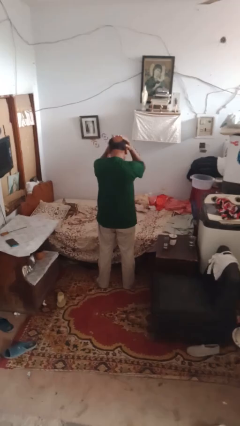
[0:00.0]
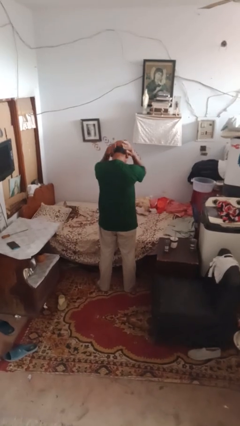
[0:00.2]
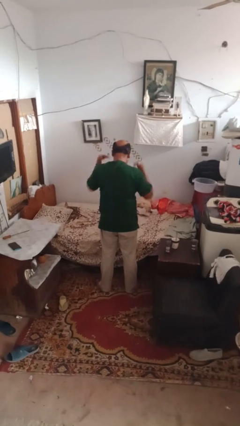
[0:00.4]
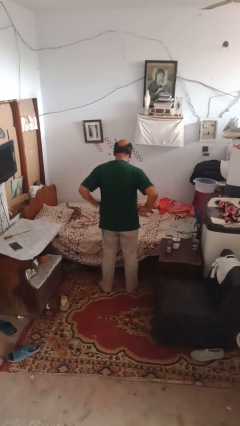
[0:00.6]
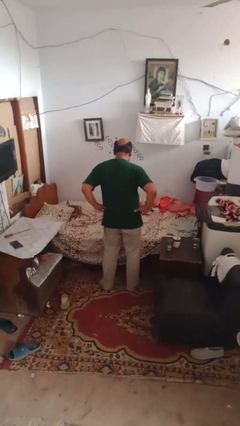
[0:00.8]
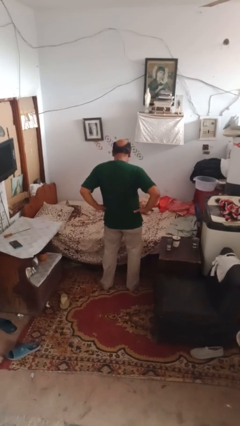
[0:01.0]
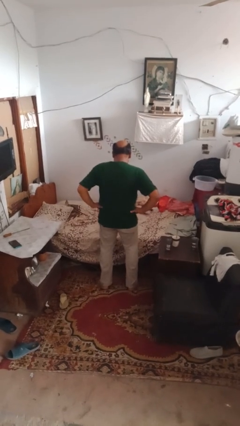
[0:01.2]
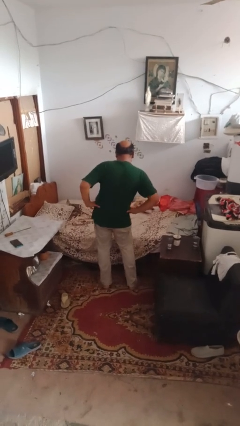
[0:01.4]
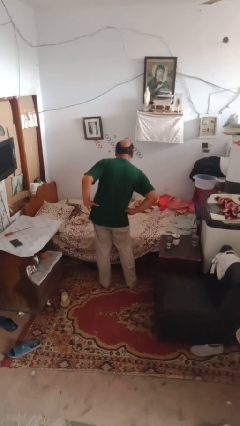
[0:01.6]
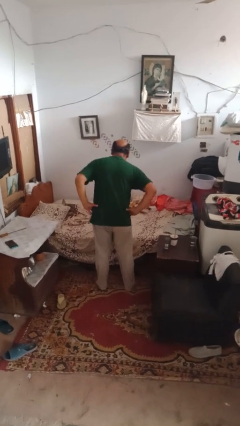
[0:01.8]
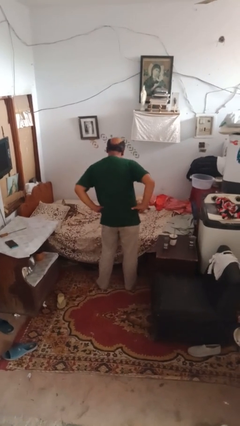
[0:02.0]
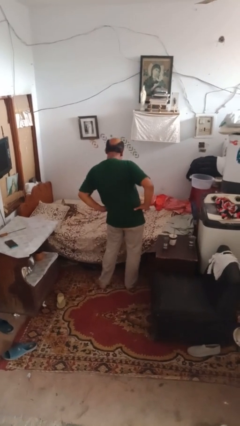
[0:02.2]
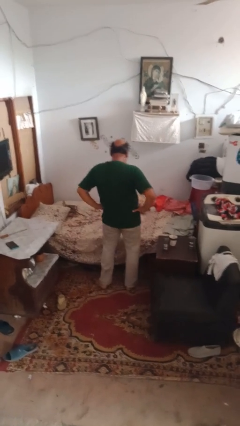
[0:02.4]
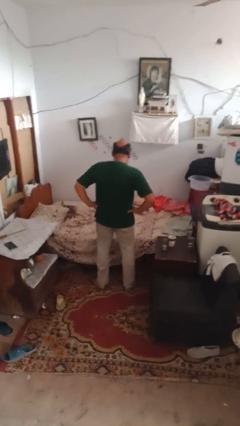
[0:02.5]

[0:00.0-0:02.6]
person wiggles hips

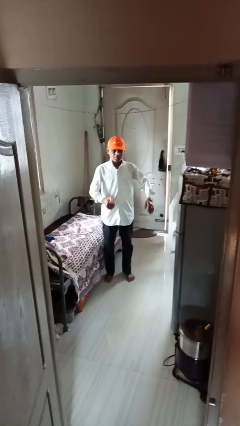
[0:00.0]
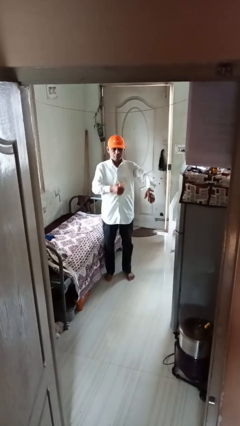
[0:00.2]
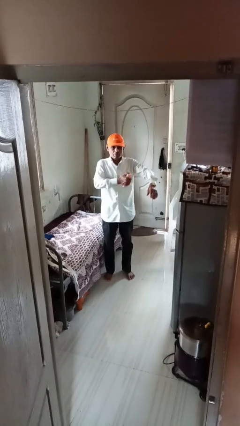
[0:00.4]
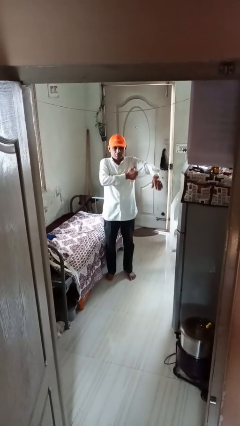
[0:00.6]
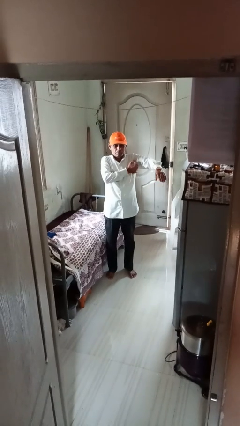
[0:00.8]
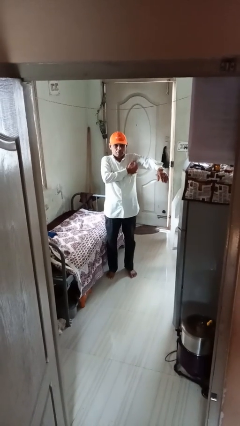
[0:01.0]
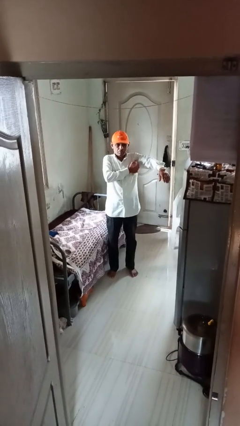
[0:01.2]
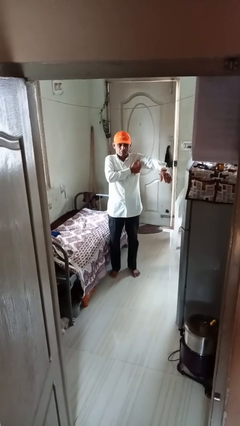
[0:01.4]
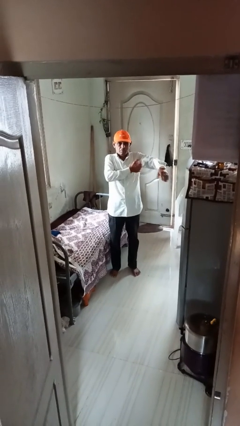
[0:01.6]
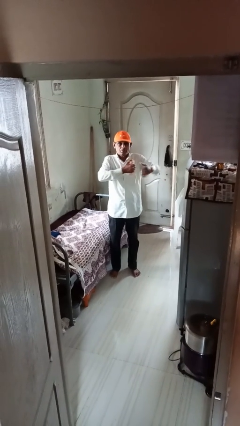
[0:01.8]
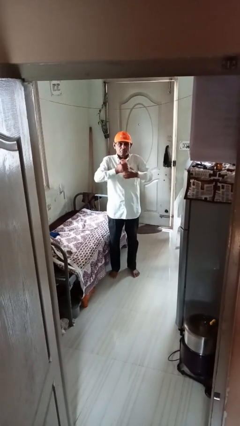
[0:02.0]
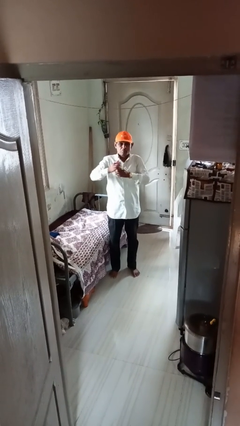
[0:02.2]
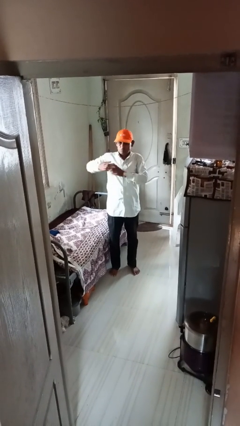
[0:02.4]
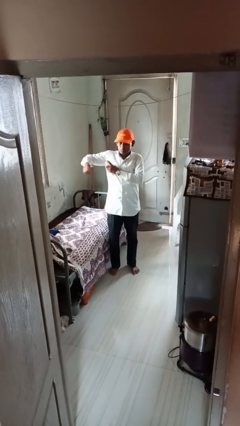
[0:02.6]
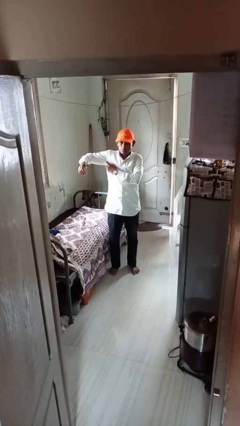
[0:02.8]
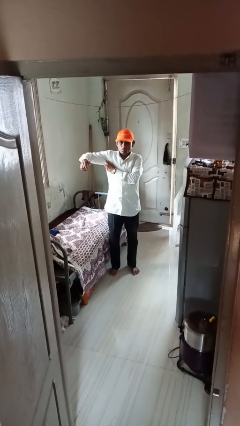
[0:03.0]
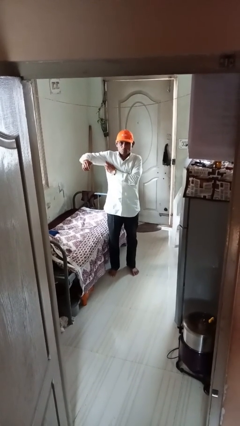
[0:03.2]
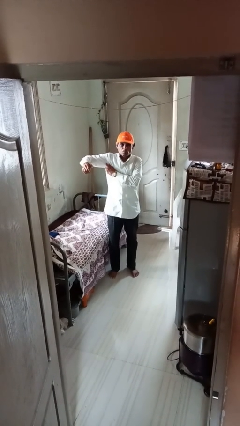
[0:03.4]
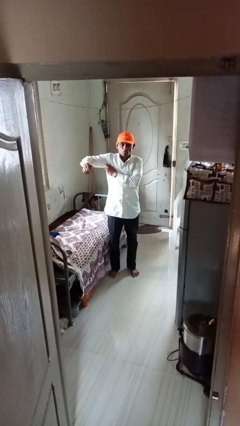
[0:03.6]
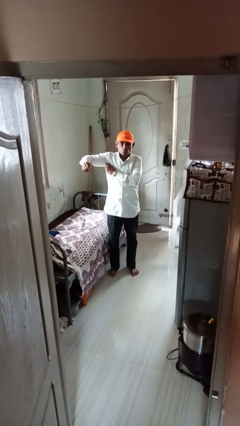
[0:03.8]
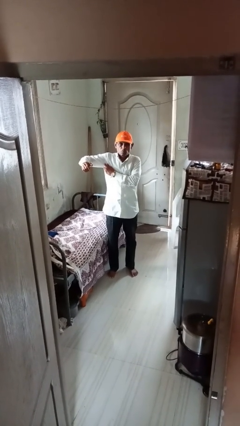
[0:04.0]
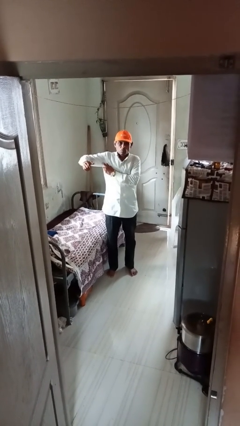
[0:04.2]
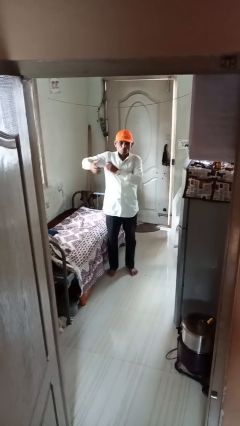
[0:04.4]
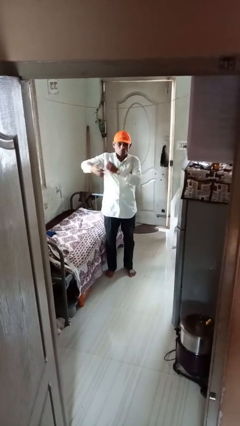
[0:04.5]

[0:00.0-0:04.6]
person applies deodorant

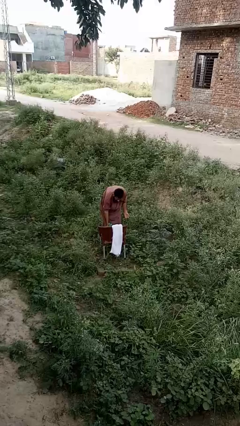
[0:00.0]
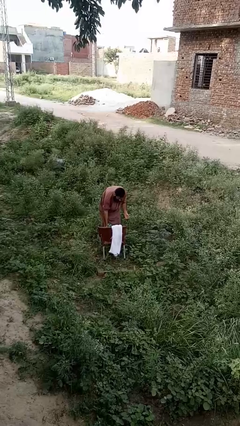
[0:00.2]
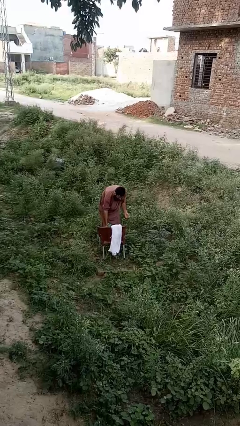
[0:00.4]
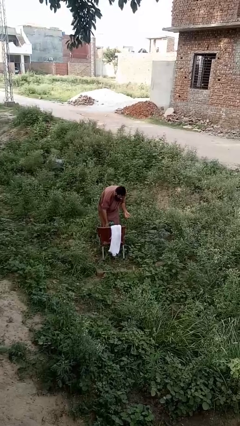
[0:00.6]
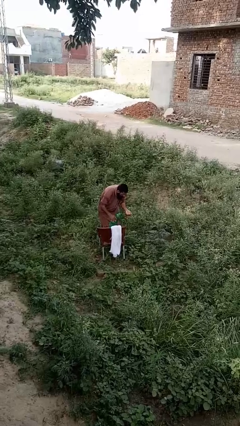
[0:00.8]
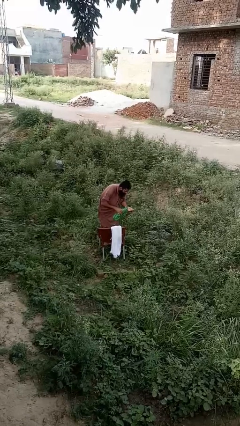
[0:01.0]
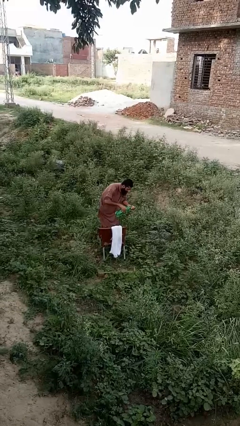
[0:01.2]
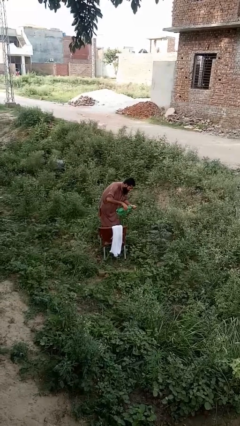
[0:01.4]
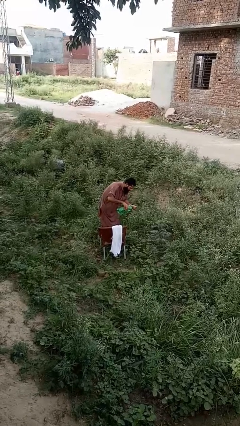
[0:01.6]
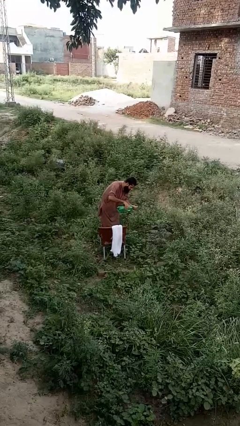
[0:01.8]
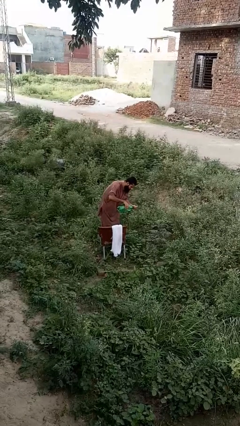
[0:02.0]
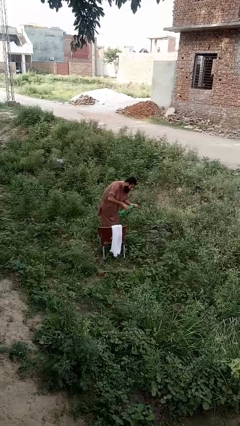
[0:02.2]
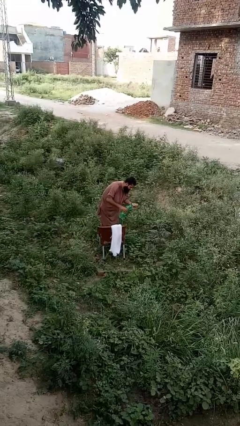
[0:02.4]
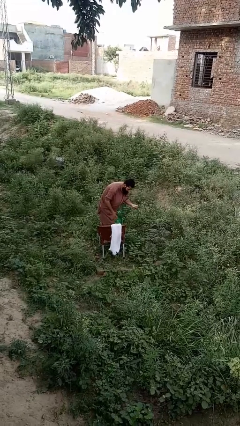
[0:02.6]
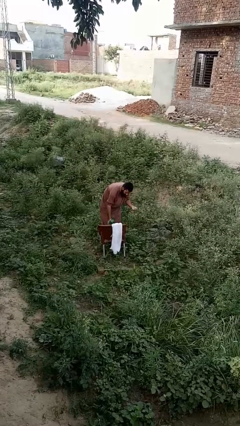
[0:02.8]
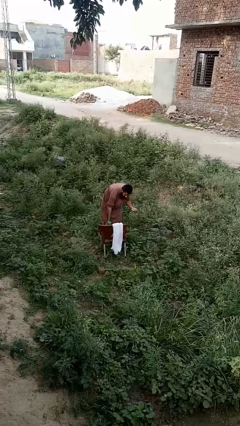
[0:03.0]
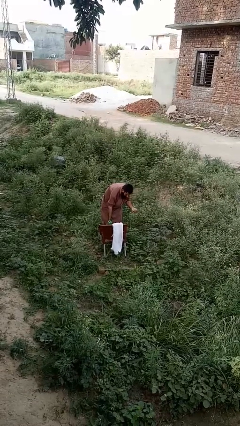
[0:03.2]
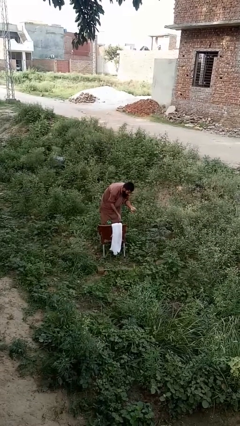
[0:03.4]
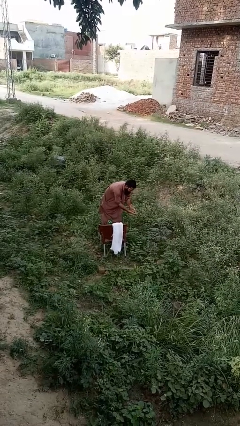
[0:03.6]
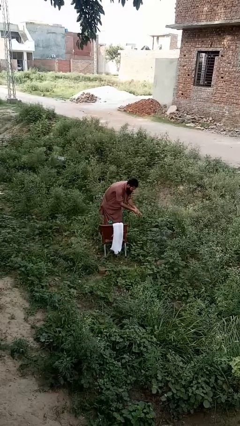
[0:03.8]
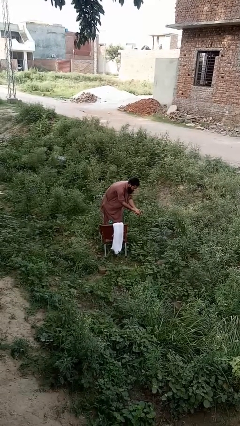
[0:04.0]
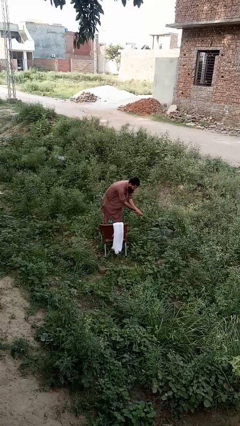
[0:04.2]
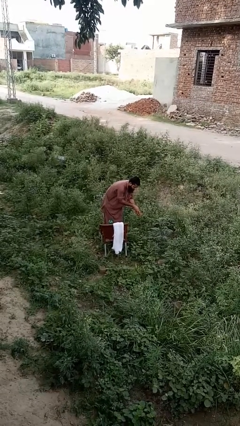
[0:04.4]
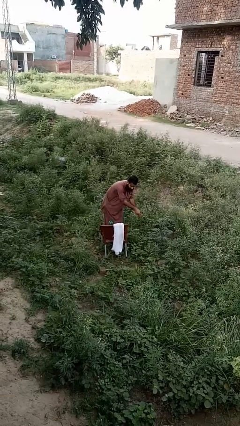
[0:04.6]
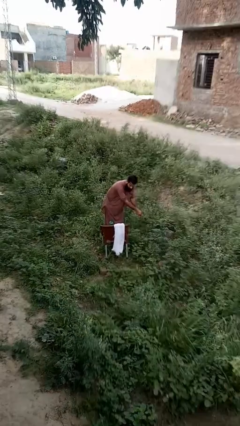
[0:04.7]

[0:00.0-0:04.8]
person washes hands

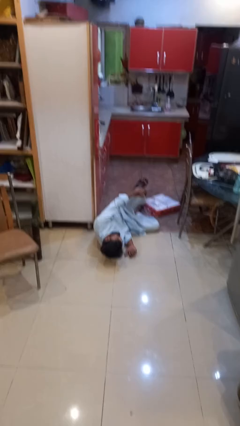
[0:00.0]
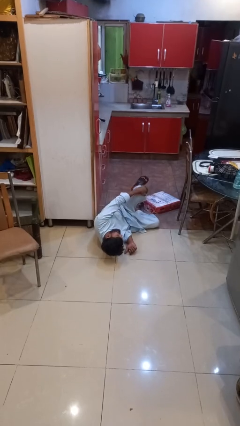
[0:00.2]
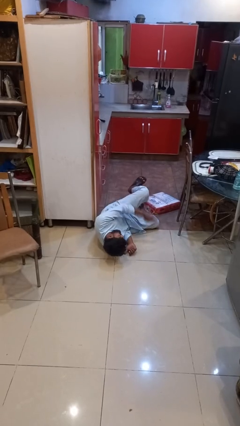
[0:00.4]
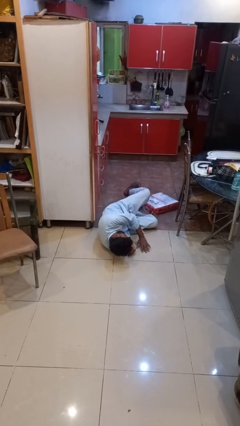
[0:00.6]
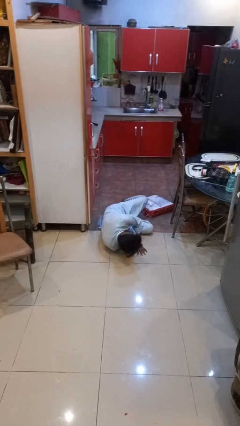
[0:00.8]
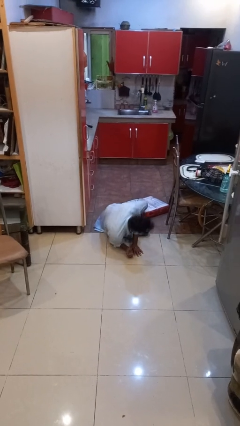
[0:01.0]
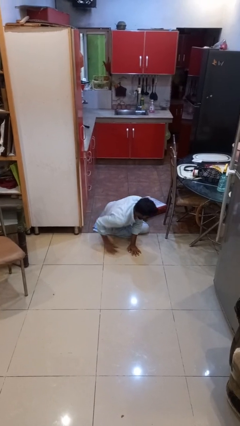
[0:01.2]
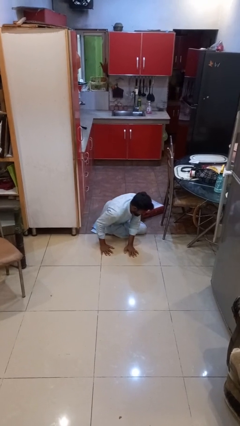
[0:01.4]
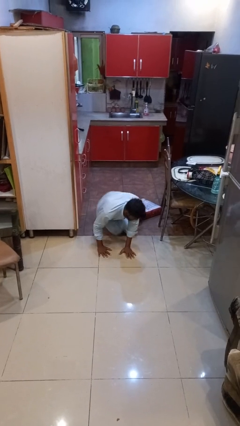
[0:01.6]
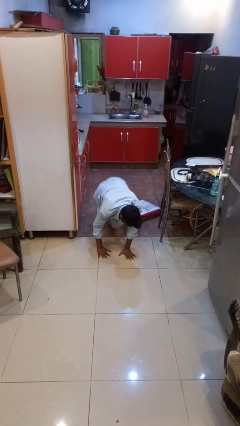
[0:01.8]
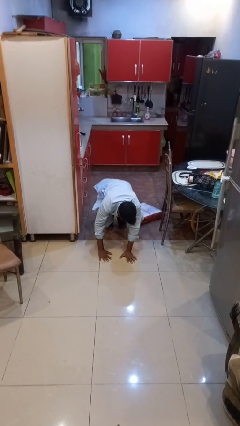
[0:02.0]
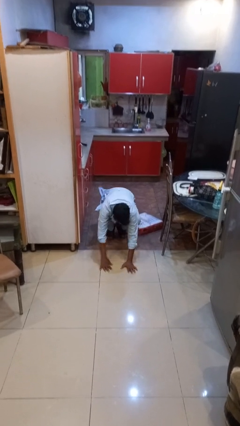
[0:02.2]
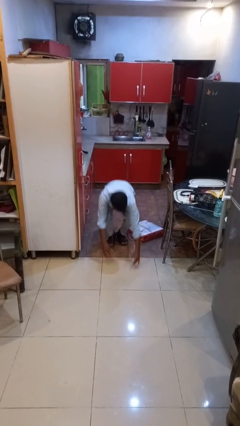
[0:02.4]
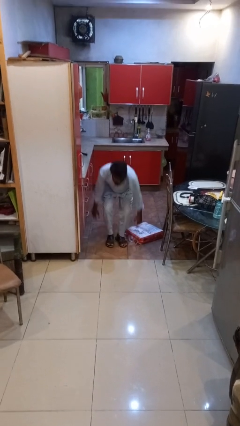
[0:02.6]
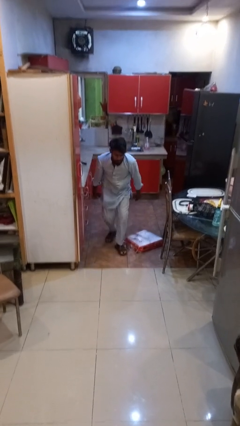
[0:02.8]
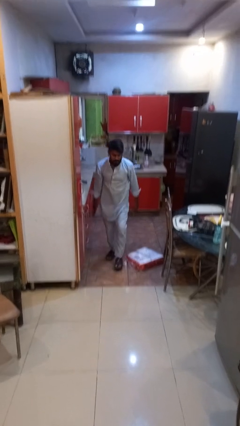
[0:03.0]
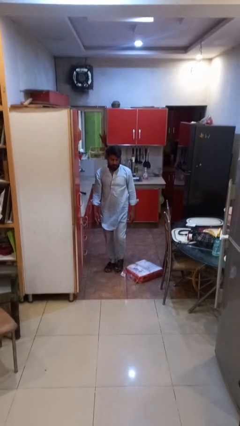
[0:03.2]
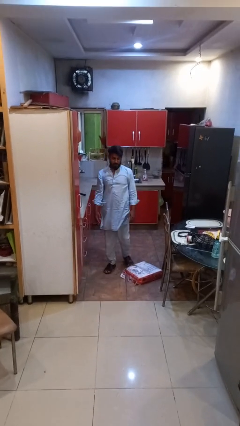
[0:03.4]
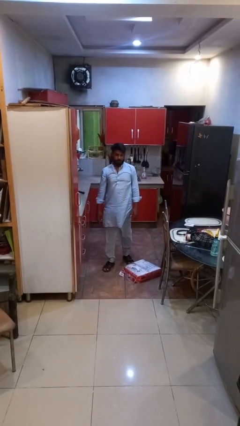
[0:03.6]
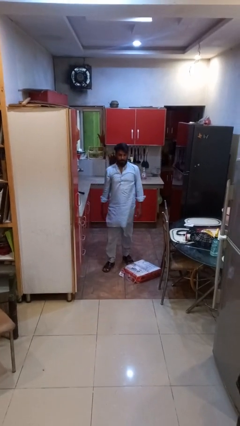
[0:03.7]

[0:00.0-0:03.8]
person stands up from floor

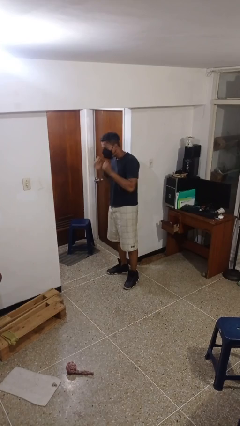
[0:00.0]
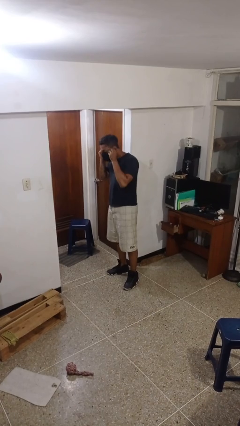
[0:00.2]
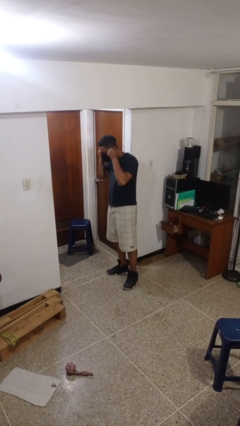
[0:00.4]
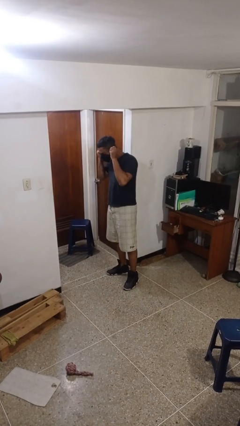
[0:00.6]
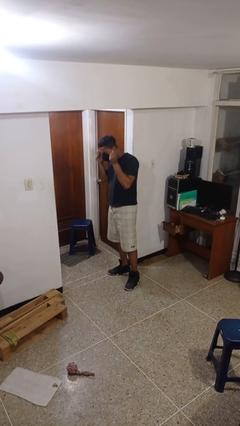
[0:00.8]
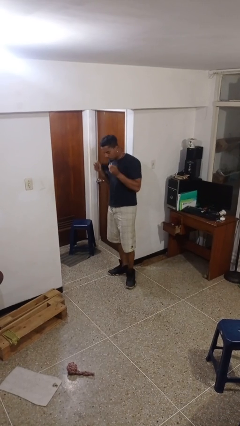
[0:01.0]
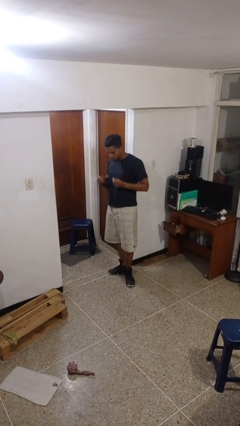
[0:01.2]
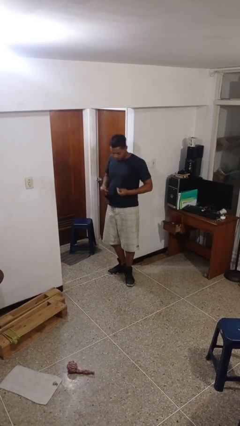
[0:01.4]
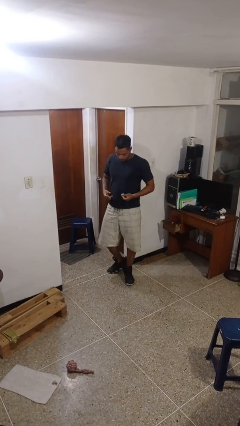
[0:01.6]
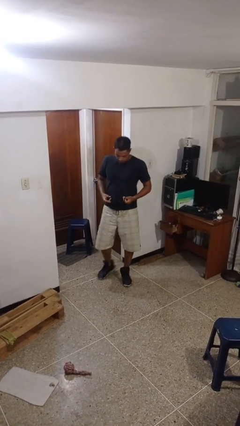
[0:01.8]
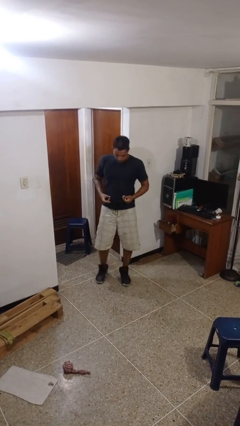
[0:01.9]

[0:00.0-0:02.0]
person takes off facemask
